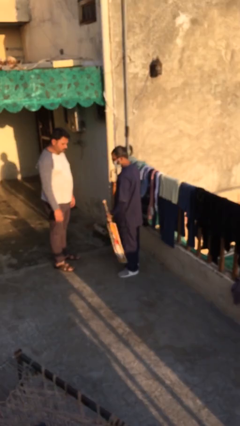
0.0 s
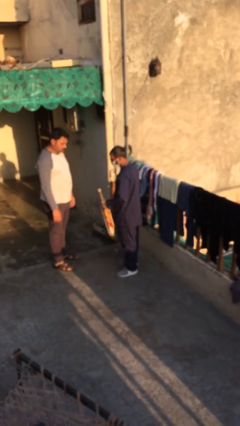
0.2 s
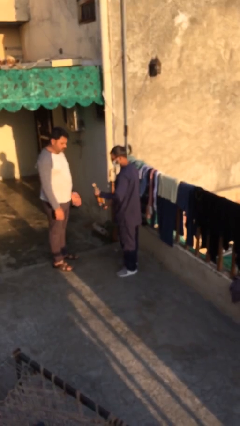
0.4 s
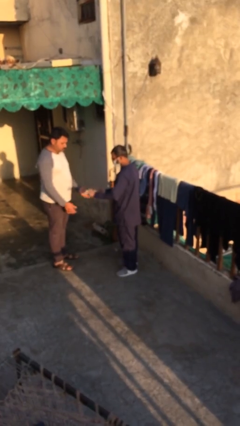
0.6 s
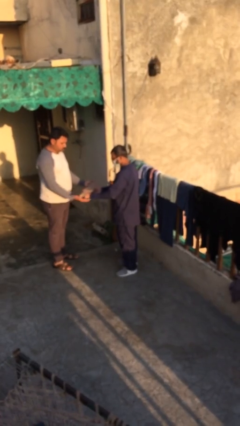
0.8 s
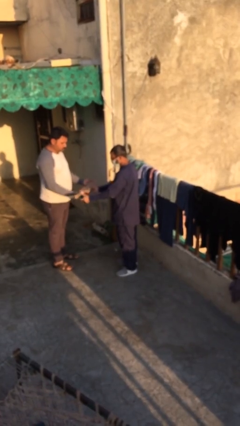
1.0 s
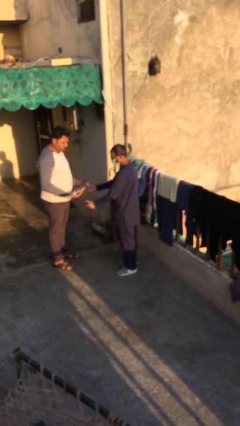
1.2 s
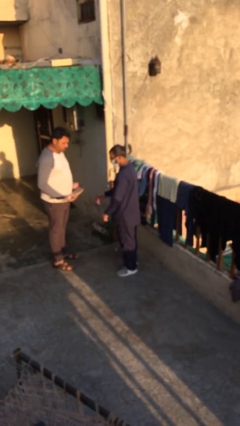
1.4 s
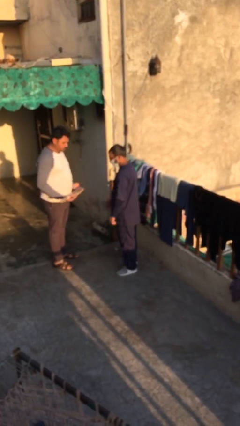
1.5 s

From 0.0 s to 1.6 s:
person transfers object to person

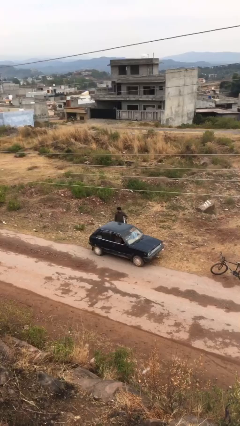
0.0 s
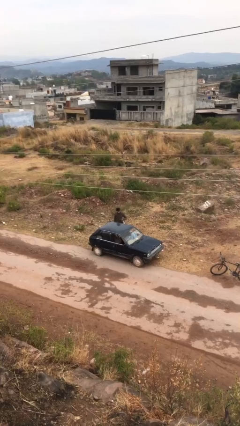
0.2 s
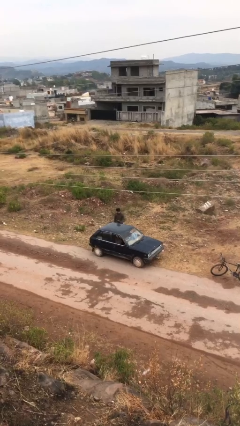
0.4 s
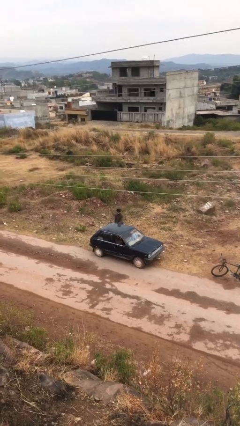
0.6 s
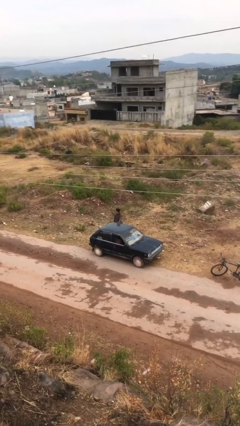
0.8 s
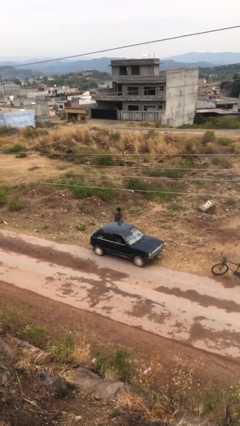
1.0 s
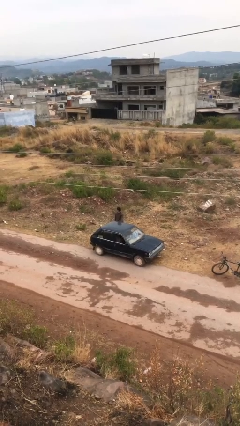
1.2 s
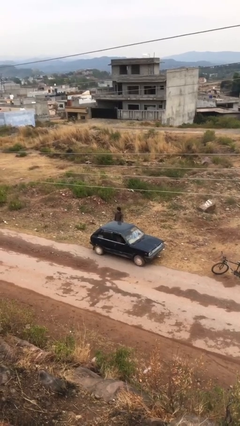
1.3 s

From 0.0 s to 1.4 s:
person closes car door

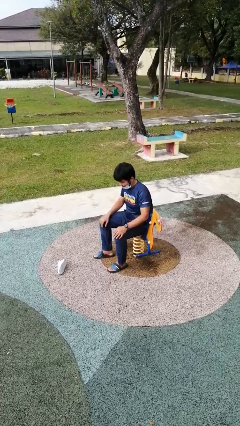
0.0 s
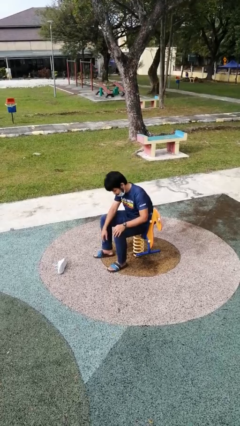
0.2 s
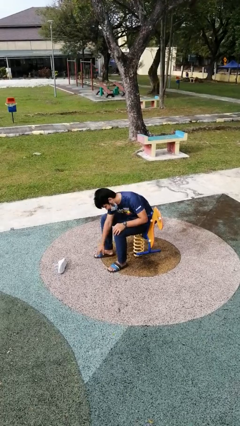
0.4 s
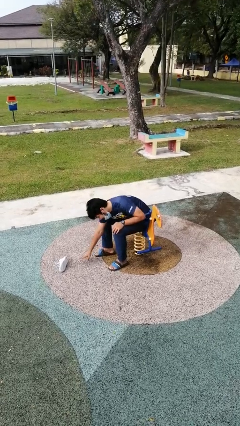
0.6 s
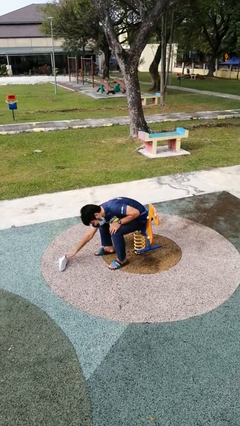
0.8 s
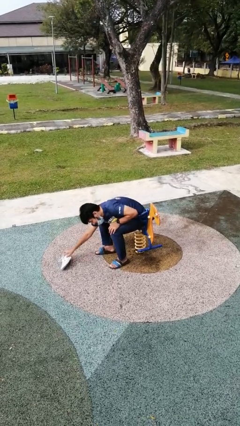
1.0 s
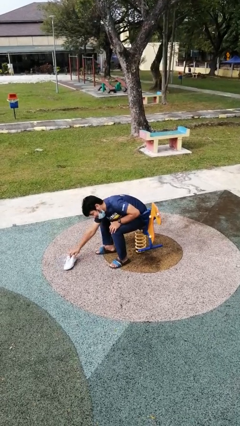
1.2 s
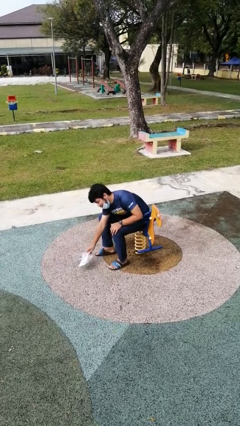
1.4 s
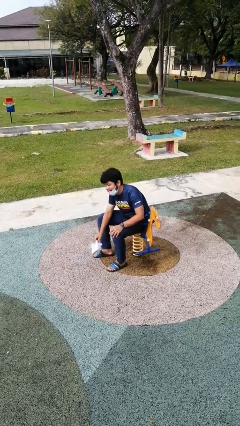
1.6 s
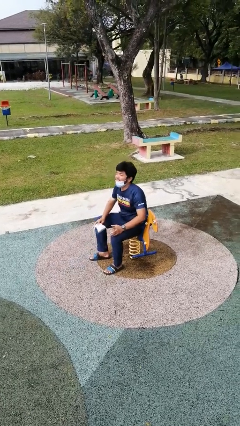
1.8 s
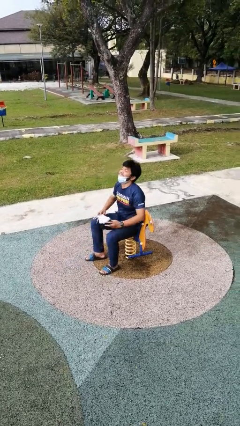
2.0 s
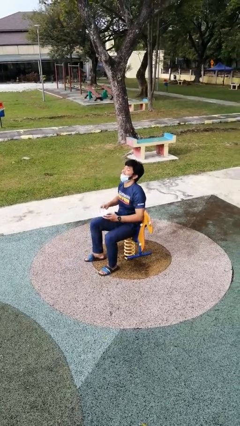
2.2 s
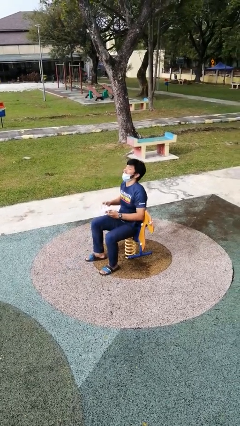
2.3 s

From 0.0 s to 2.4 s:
person picks up object from floor

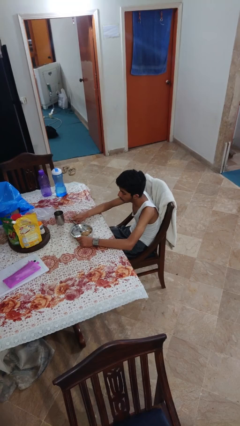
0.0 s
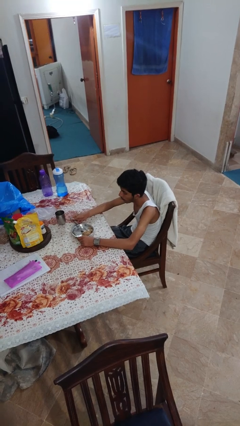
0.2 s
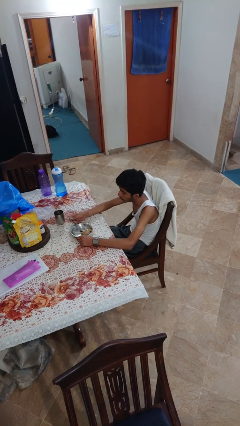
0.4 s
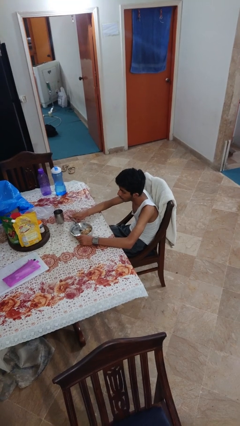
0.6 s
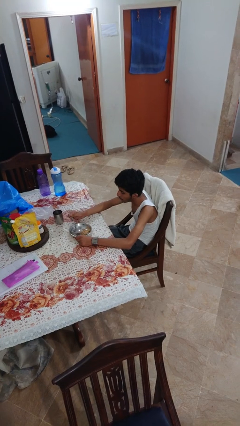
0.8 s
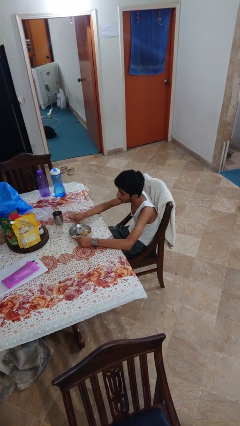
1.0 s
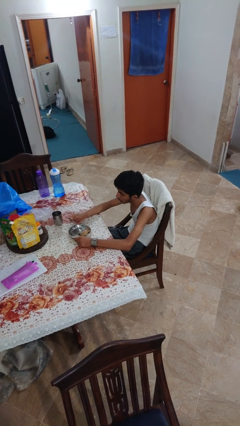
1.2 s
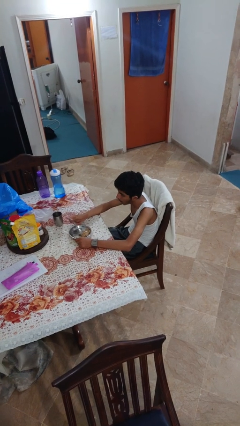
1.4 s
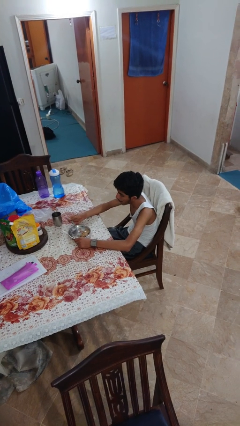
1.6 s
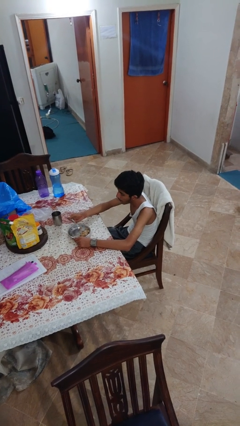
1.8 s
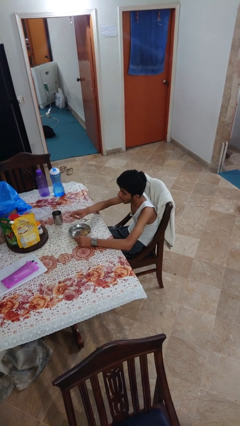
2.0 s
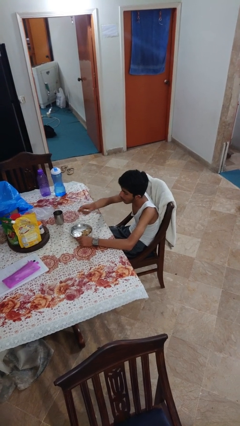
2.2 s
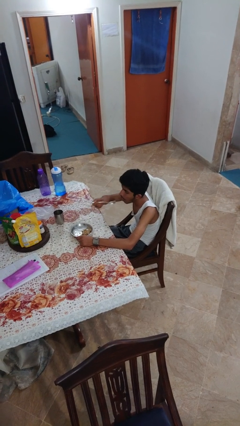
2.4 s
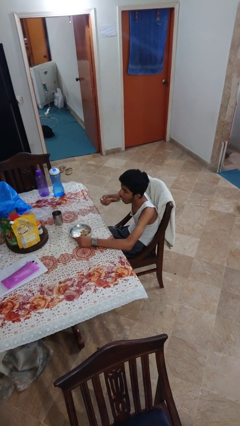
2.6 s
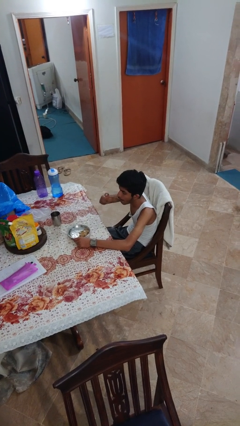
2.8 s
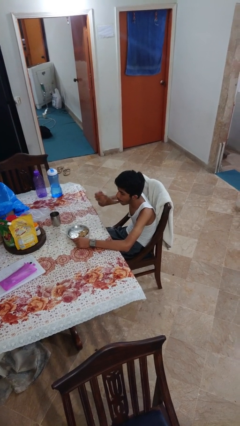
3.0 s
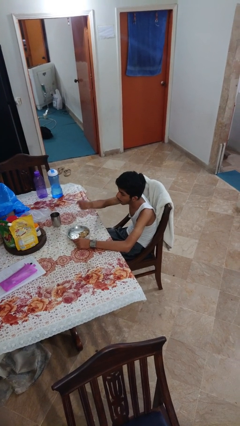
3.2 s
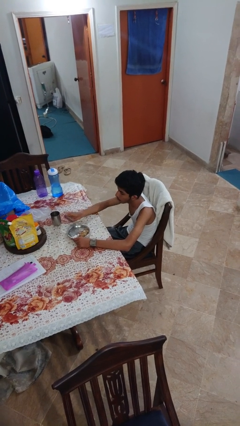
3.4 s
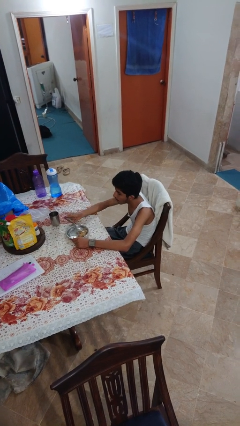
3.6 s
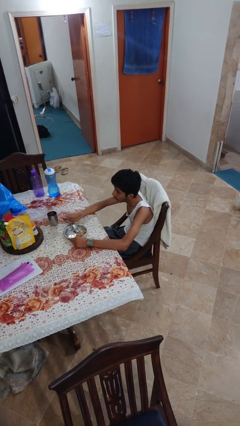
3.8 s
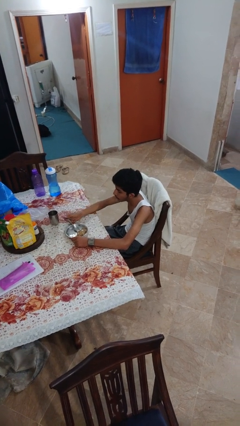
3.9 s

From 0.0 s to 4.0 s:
person eats with utensil

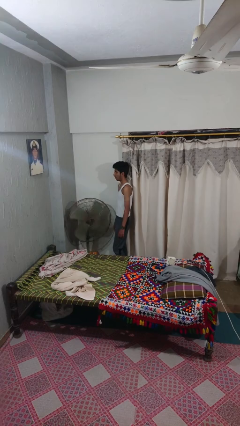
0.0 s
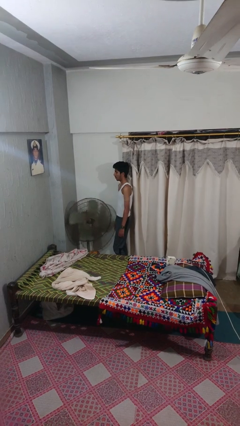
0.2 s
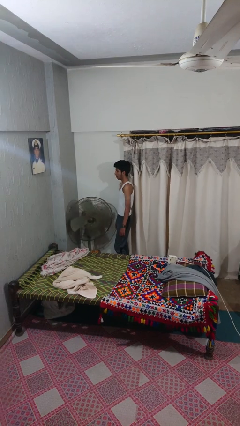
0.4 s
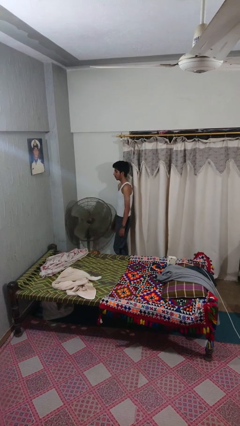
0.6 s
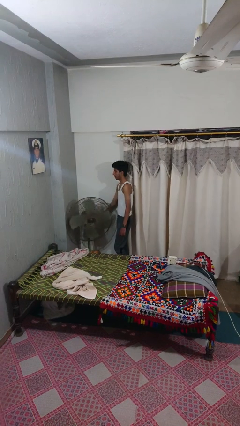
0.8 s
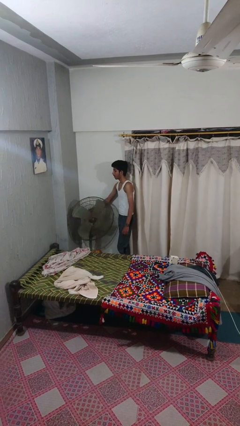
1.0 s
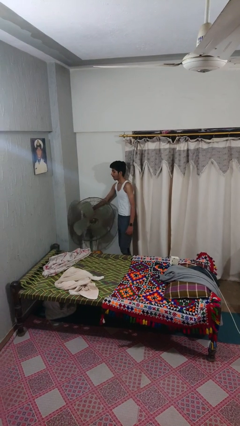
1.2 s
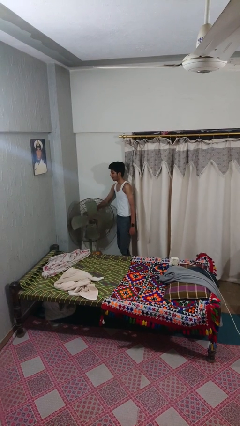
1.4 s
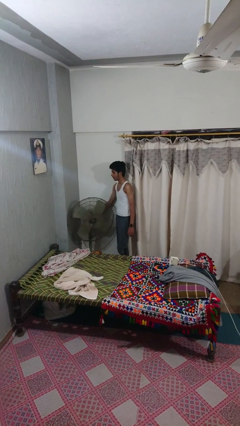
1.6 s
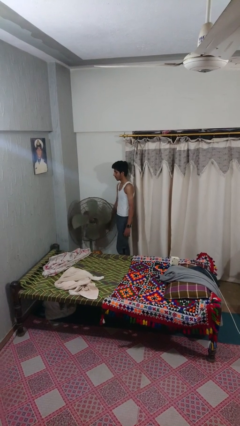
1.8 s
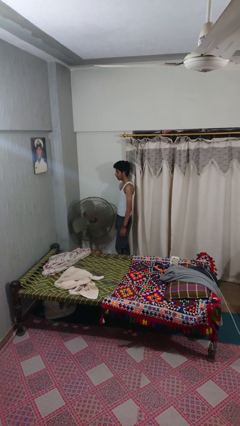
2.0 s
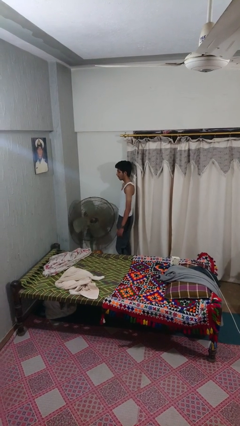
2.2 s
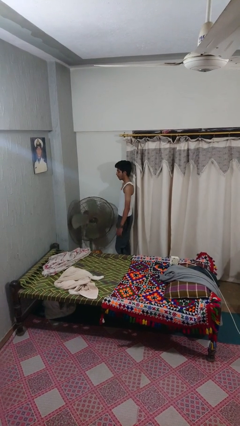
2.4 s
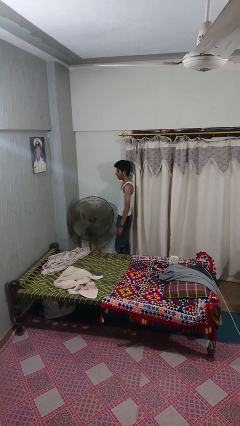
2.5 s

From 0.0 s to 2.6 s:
person turns on fan

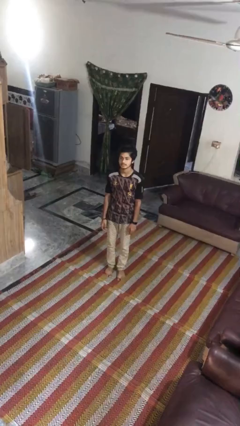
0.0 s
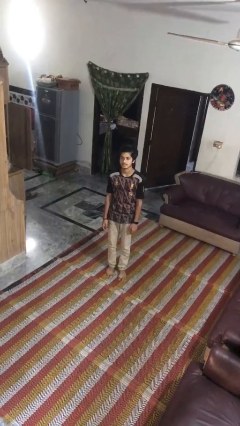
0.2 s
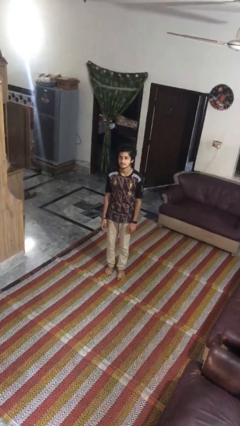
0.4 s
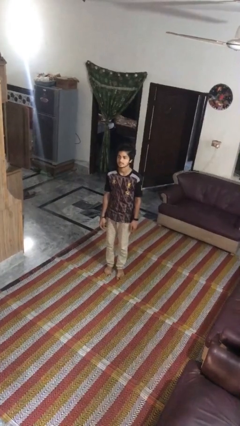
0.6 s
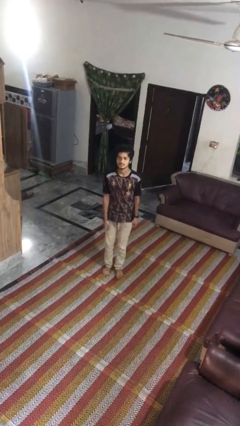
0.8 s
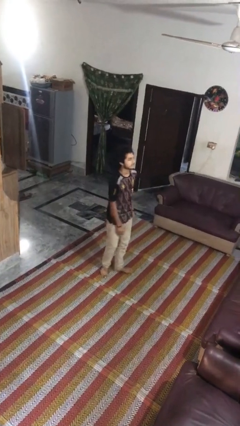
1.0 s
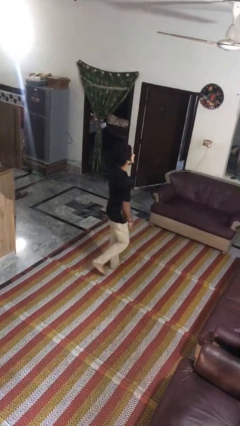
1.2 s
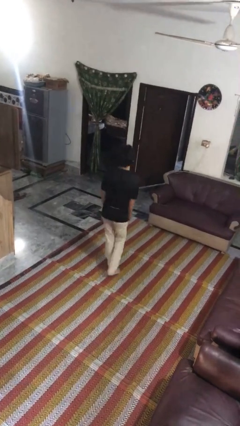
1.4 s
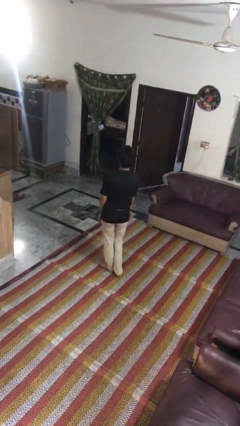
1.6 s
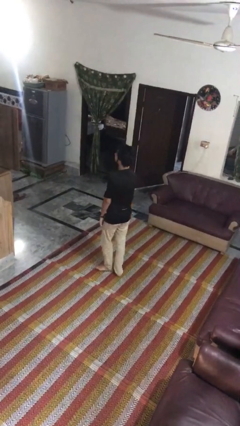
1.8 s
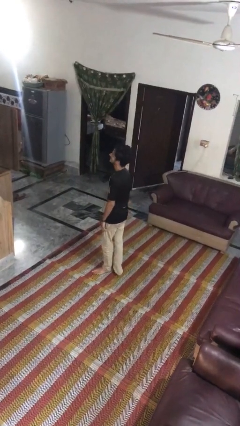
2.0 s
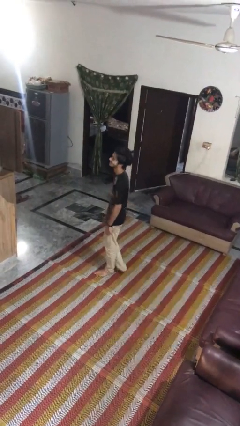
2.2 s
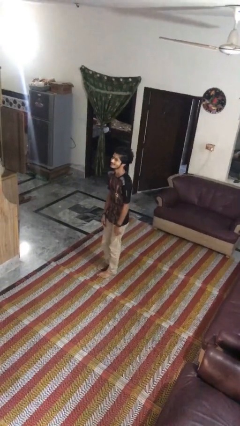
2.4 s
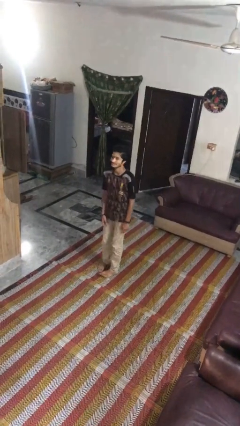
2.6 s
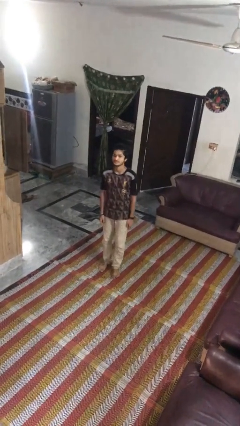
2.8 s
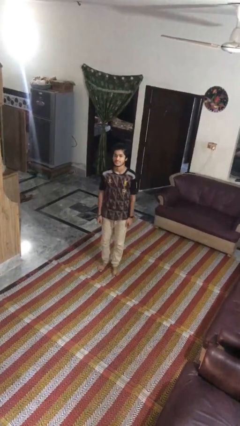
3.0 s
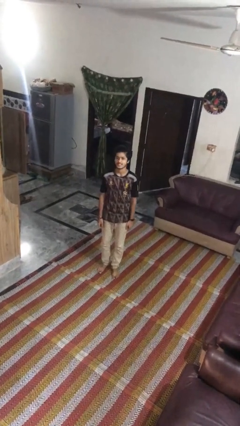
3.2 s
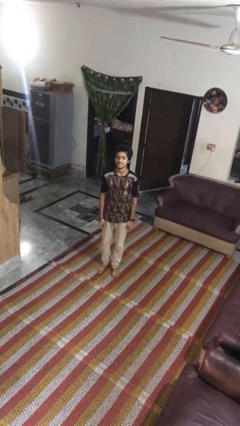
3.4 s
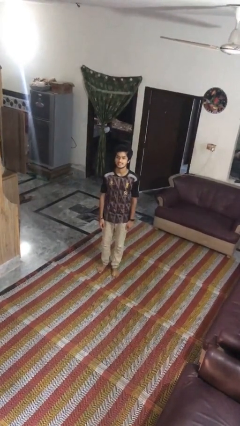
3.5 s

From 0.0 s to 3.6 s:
person twirls

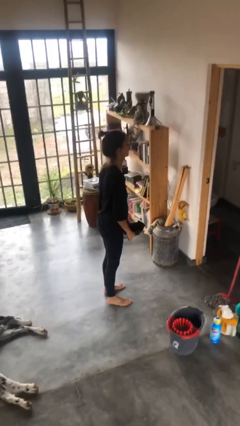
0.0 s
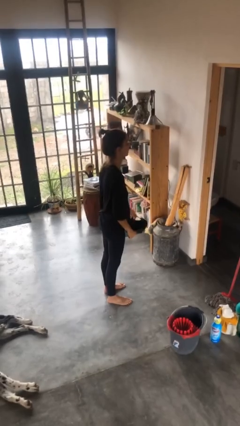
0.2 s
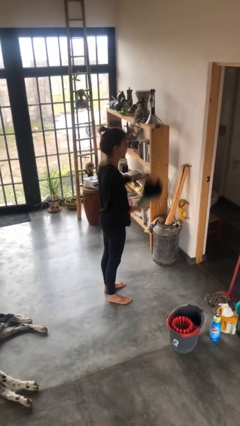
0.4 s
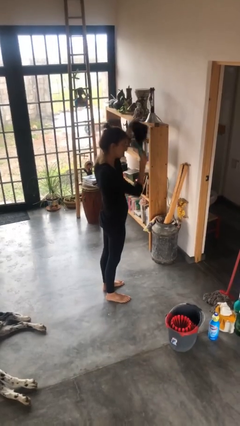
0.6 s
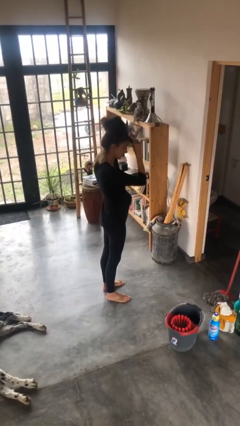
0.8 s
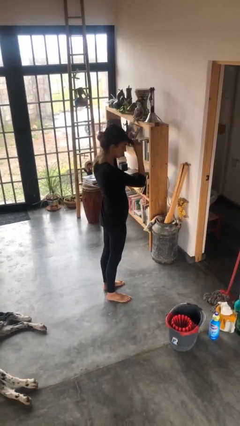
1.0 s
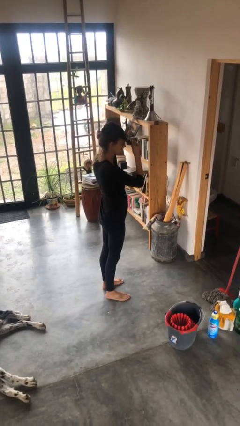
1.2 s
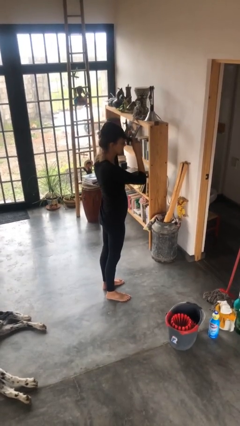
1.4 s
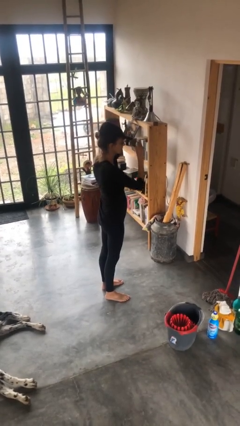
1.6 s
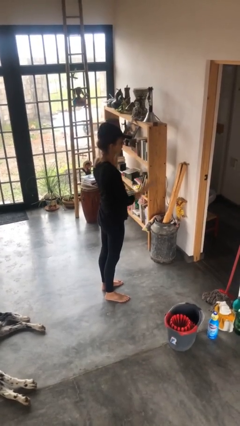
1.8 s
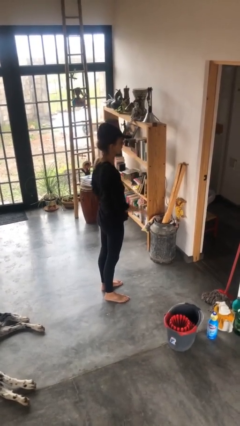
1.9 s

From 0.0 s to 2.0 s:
person puts on hat
